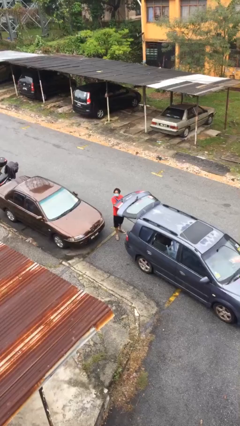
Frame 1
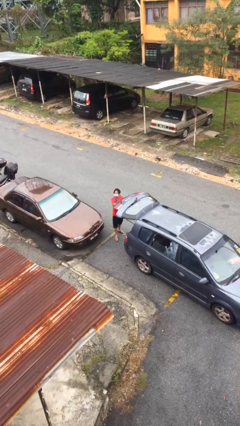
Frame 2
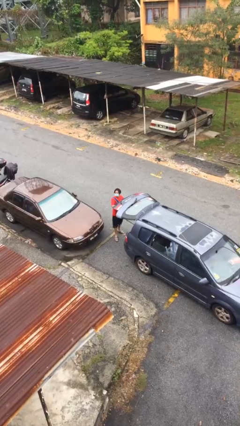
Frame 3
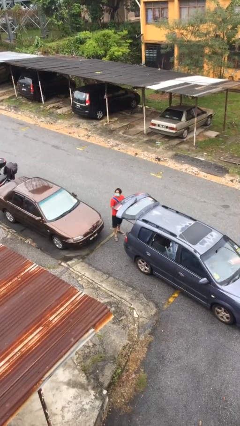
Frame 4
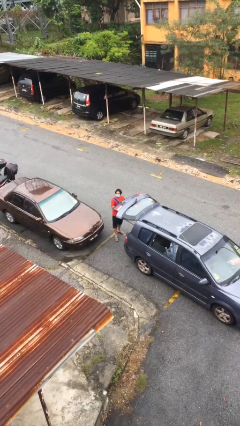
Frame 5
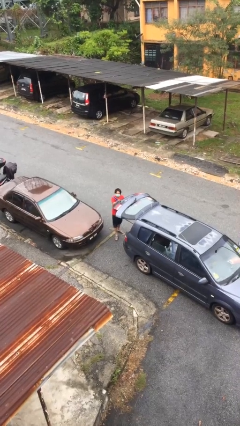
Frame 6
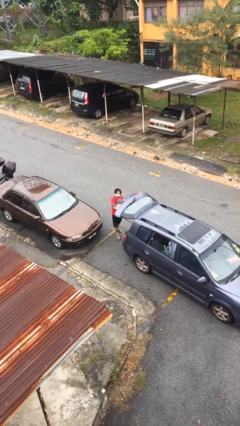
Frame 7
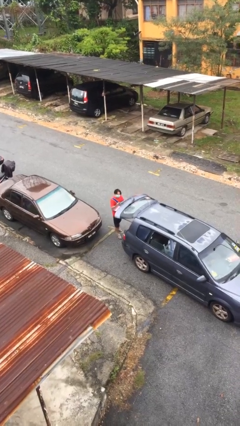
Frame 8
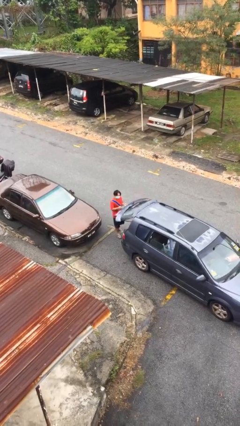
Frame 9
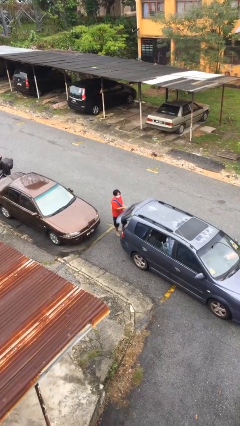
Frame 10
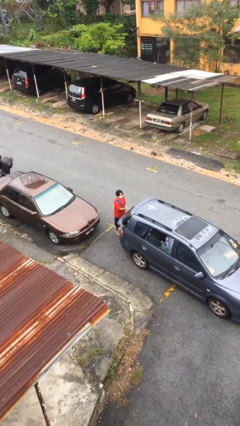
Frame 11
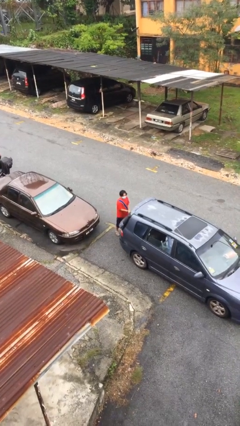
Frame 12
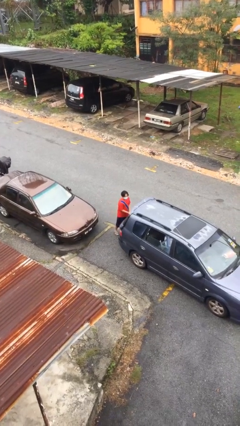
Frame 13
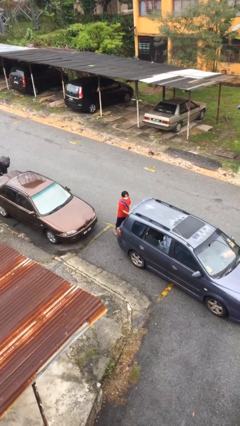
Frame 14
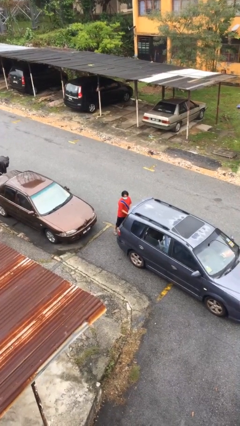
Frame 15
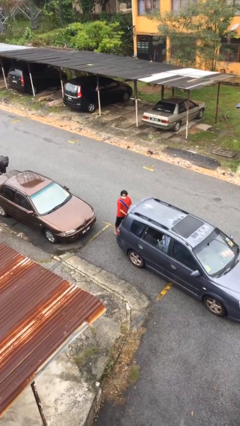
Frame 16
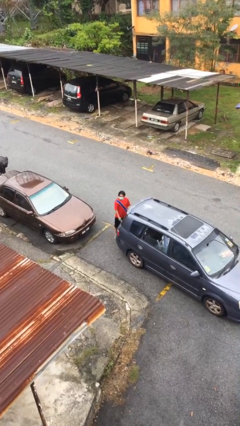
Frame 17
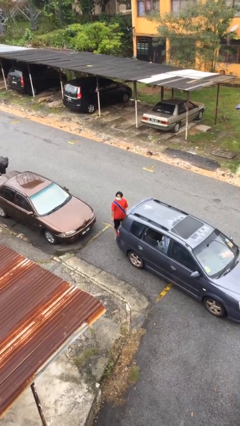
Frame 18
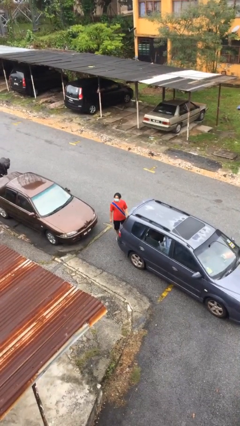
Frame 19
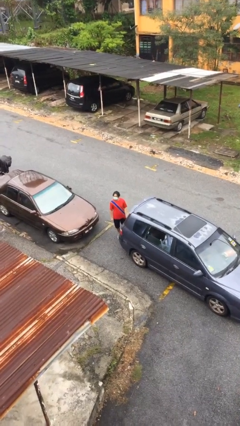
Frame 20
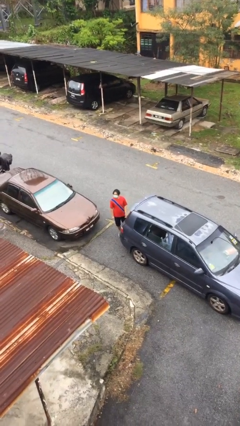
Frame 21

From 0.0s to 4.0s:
person closes car trunk

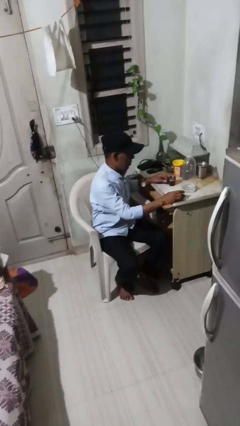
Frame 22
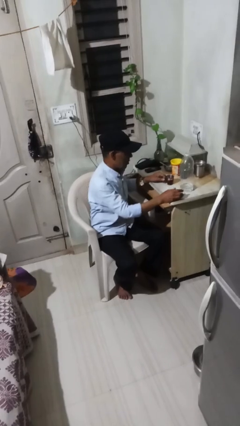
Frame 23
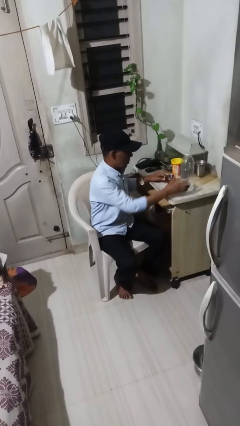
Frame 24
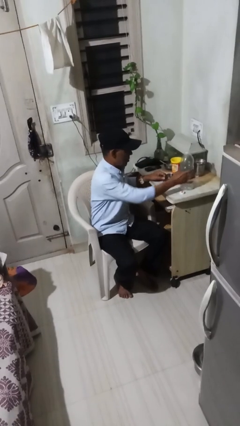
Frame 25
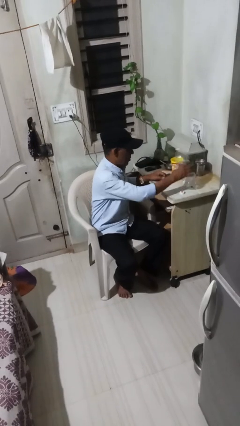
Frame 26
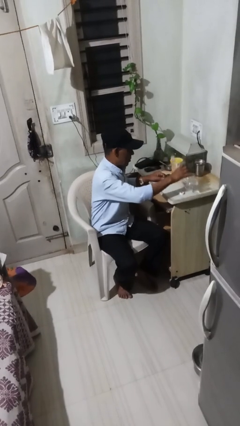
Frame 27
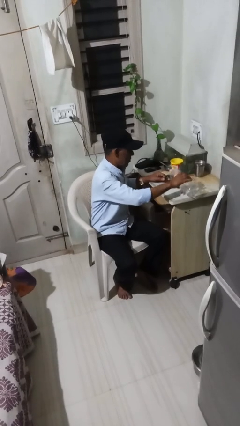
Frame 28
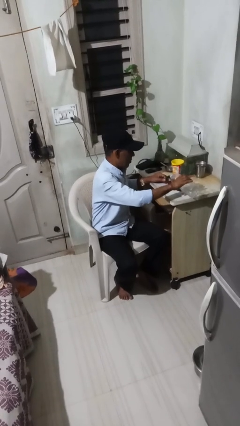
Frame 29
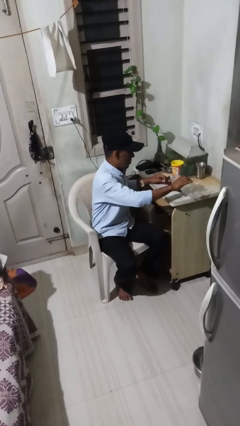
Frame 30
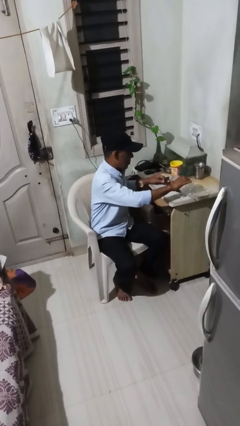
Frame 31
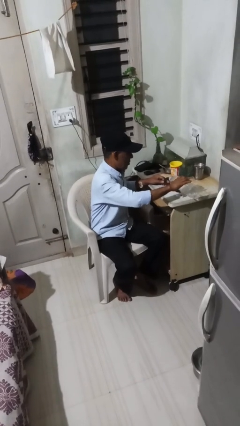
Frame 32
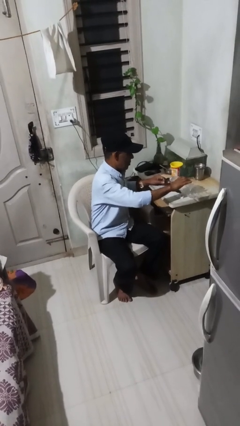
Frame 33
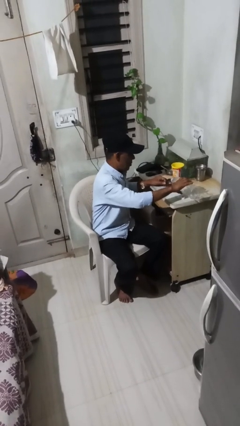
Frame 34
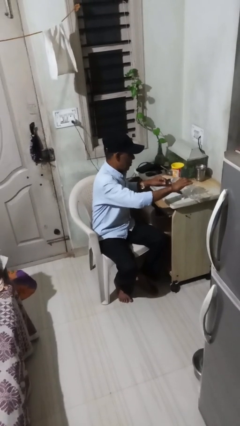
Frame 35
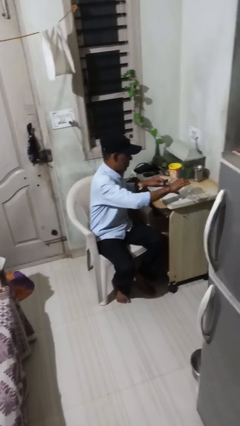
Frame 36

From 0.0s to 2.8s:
person pours liquid into cup

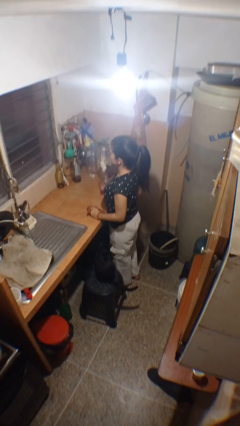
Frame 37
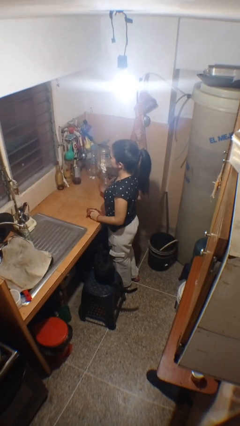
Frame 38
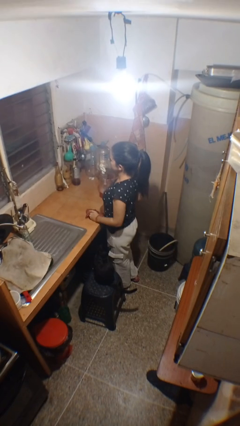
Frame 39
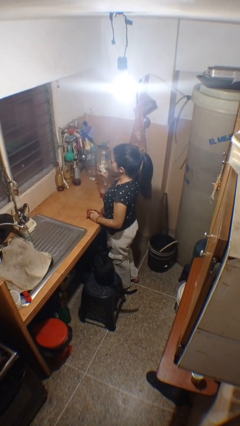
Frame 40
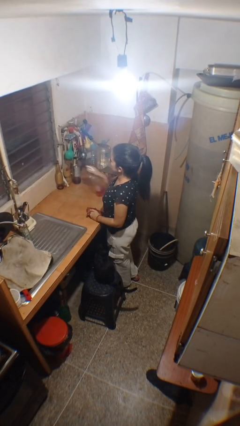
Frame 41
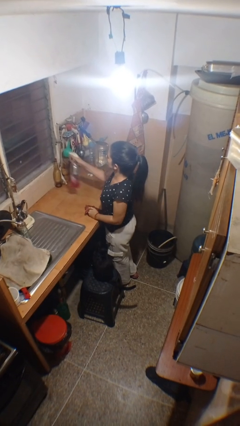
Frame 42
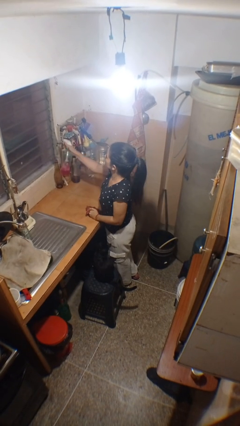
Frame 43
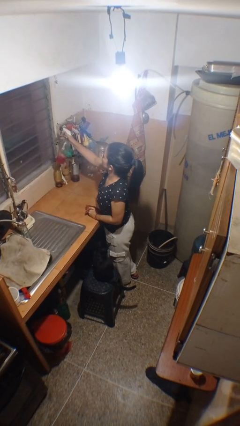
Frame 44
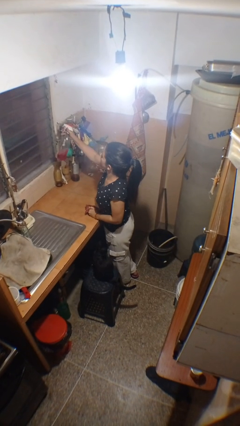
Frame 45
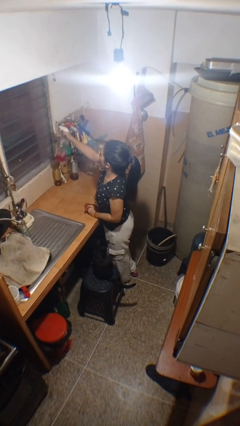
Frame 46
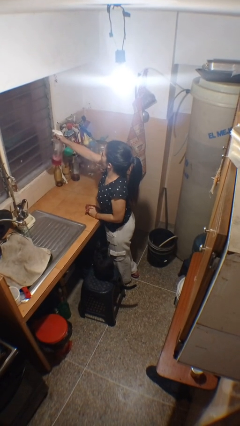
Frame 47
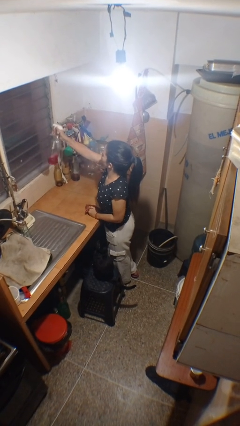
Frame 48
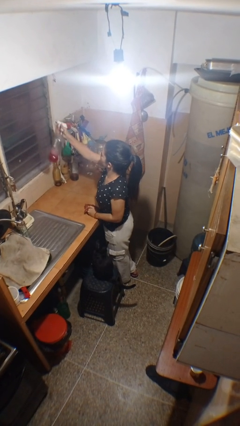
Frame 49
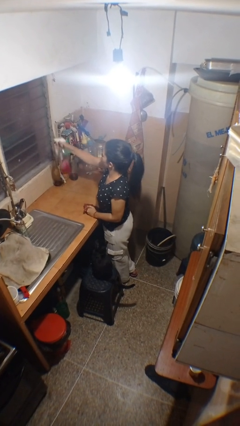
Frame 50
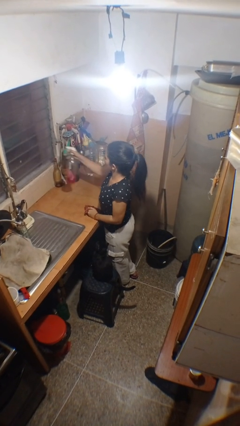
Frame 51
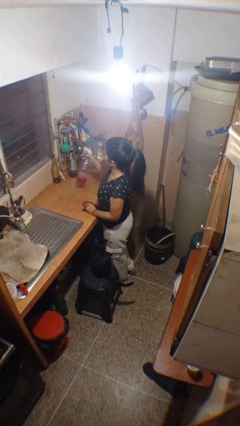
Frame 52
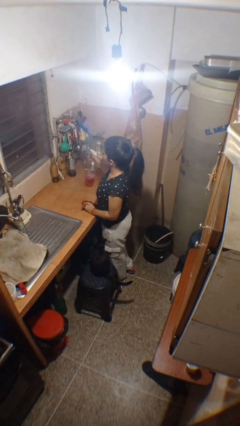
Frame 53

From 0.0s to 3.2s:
person sprays from bottle

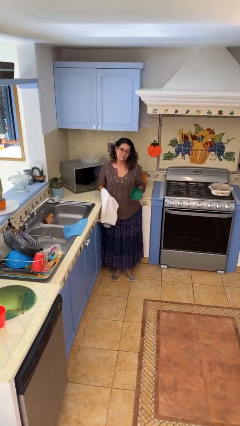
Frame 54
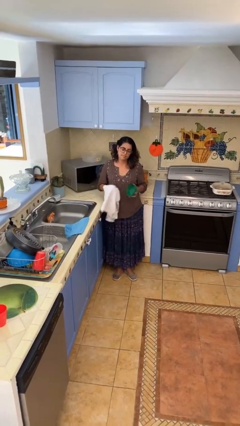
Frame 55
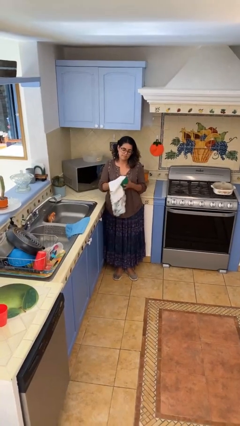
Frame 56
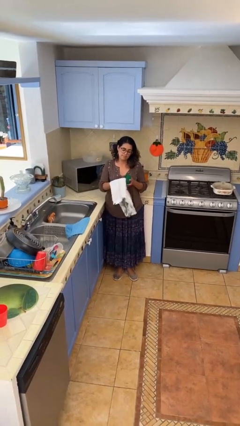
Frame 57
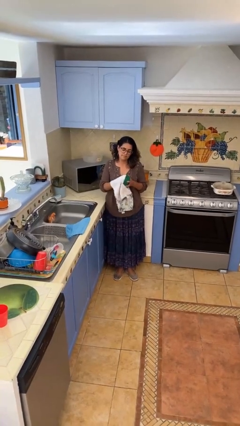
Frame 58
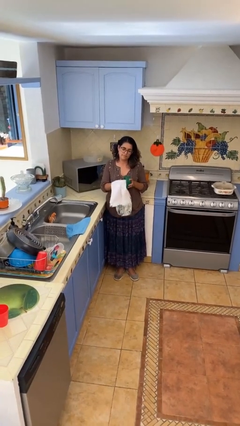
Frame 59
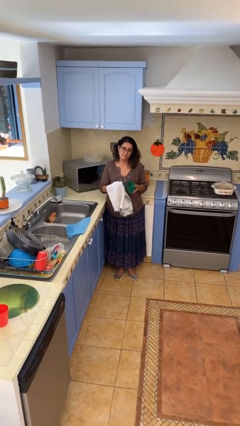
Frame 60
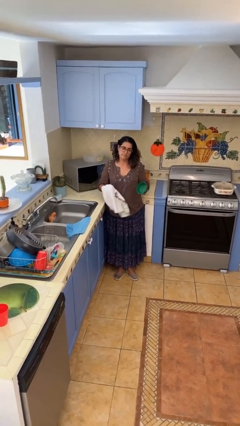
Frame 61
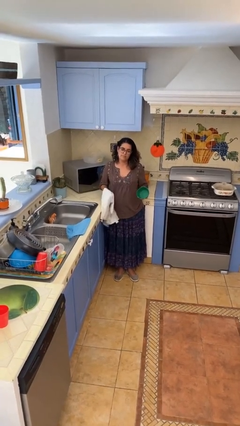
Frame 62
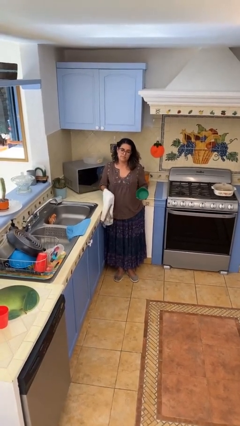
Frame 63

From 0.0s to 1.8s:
person dries dish

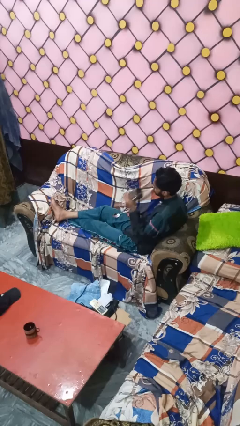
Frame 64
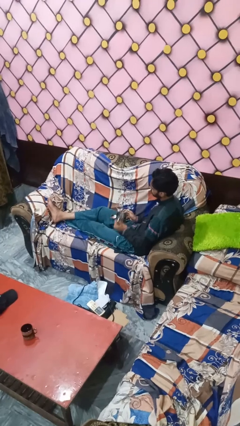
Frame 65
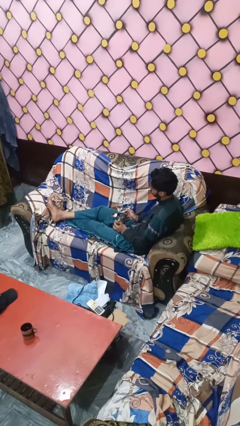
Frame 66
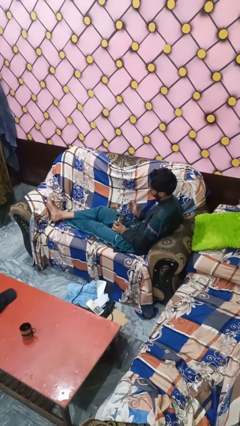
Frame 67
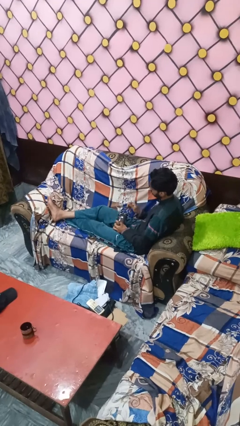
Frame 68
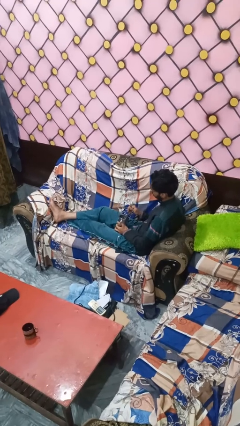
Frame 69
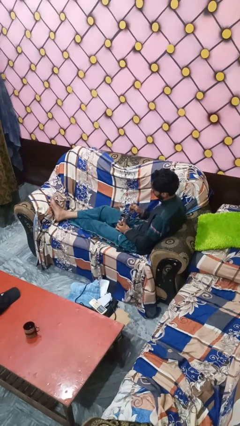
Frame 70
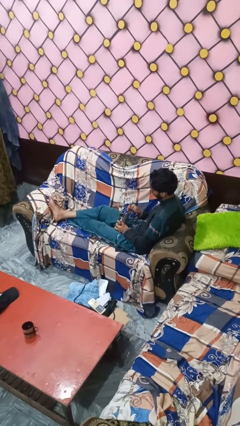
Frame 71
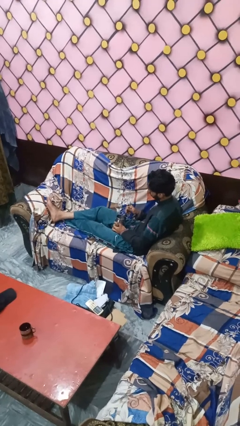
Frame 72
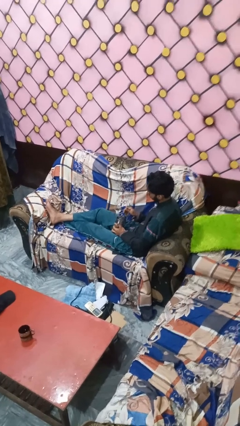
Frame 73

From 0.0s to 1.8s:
person stirs mug

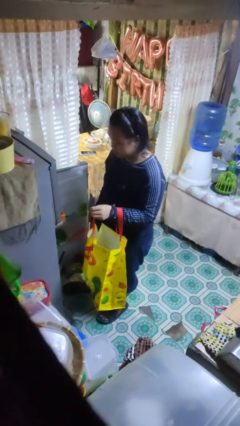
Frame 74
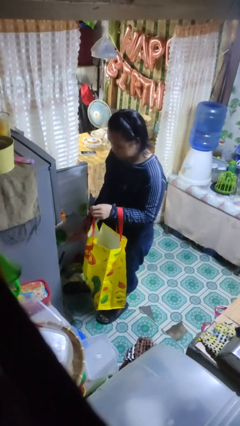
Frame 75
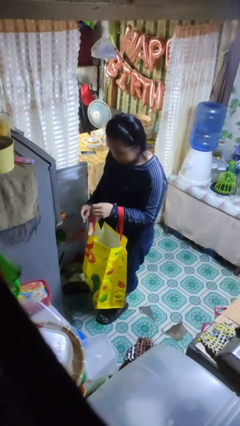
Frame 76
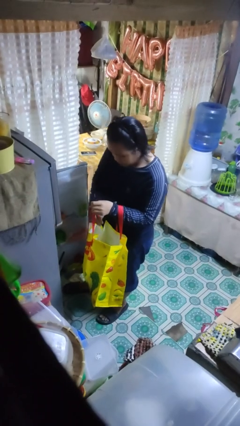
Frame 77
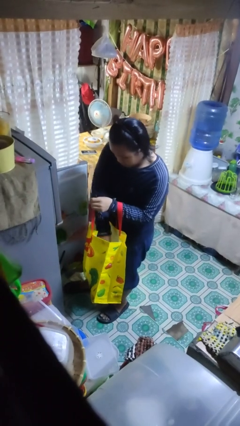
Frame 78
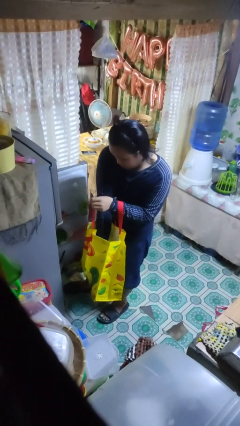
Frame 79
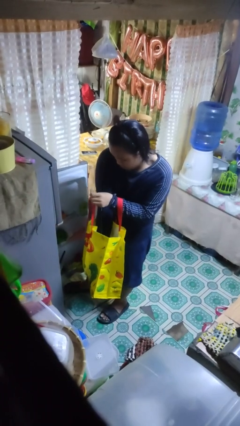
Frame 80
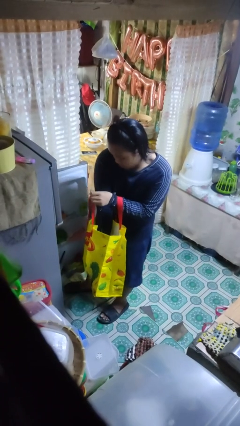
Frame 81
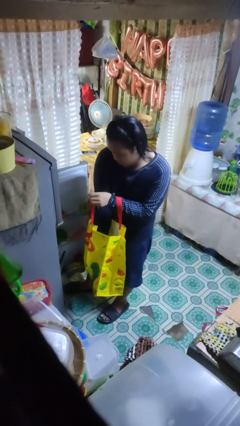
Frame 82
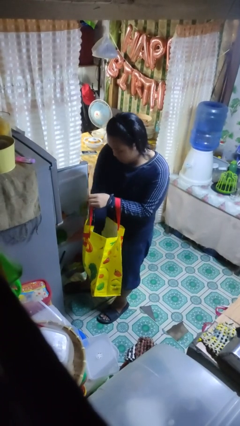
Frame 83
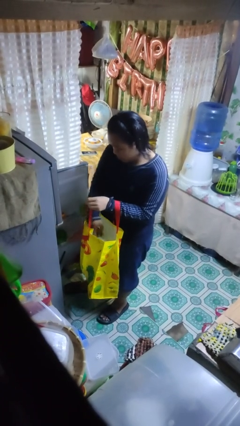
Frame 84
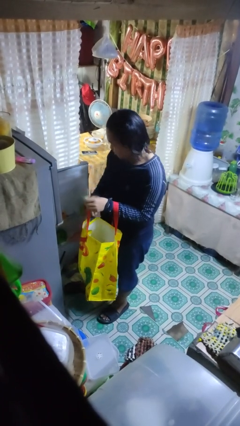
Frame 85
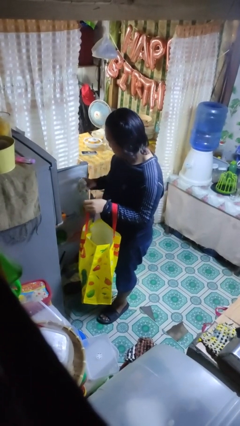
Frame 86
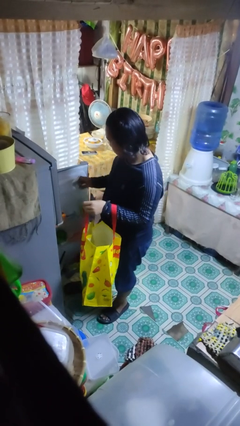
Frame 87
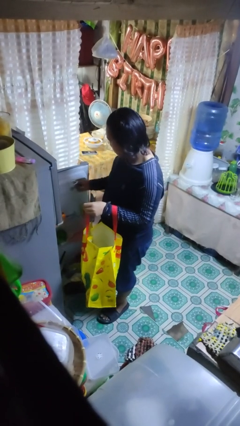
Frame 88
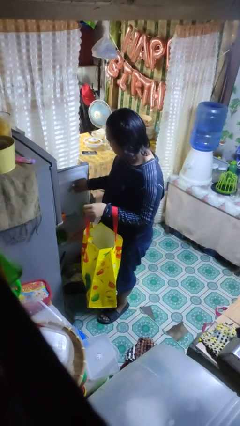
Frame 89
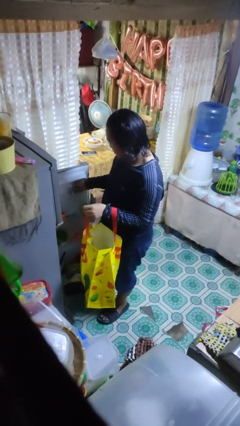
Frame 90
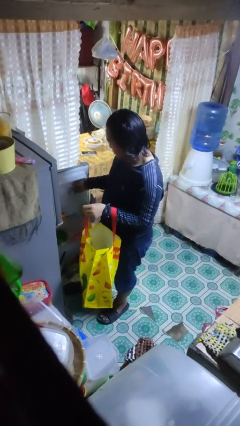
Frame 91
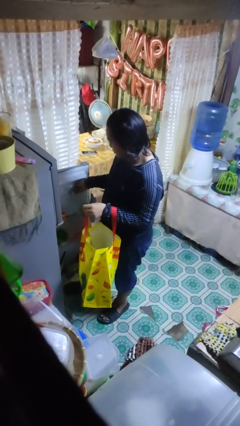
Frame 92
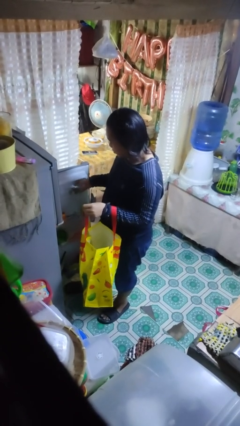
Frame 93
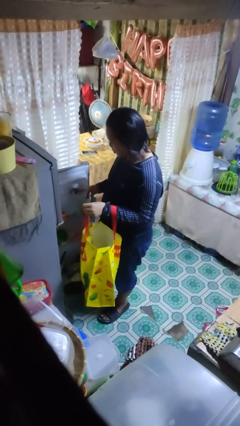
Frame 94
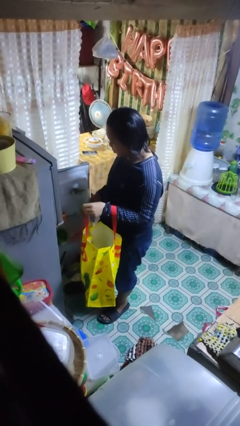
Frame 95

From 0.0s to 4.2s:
person loads groceries into refrigerator
